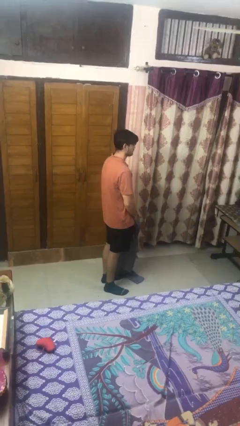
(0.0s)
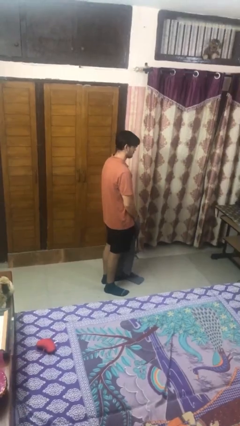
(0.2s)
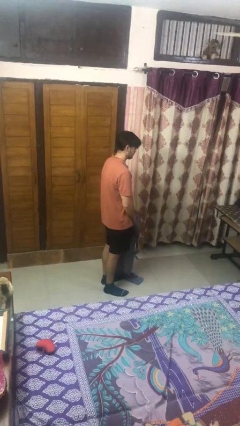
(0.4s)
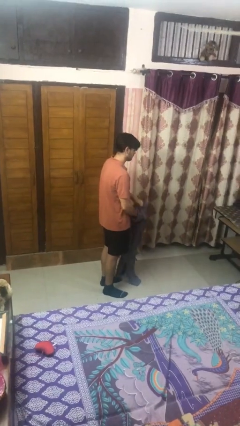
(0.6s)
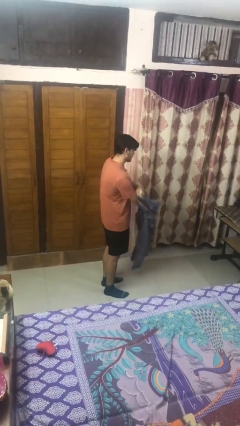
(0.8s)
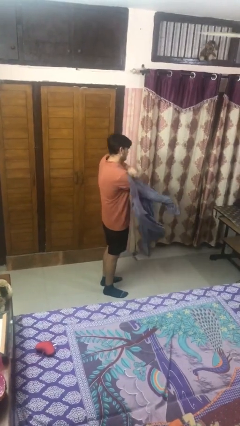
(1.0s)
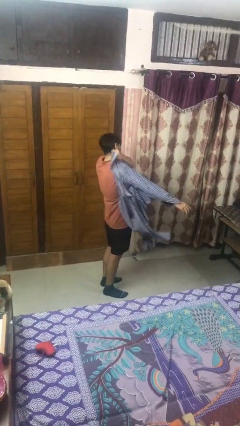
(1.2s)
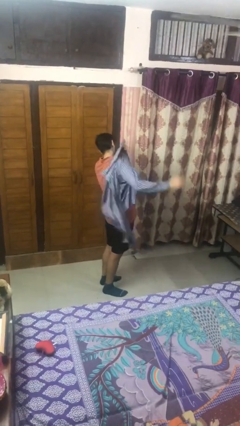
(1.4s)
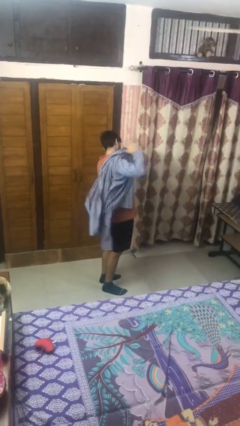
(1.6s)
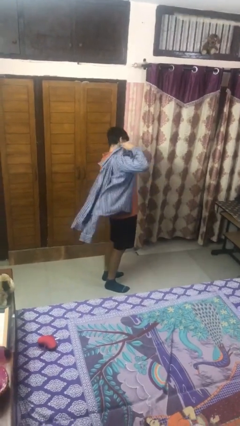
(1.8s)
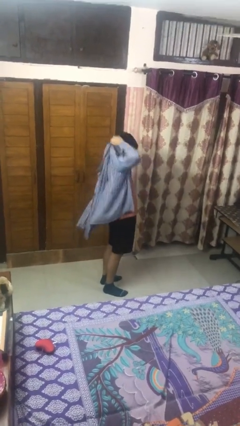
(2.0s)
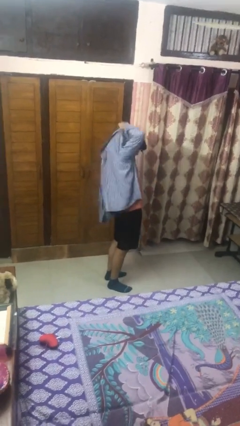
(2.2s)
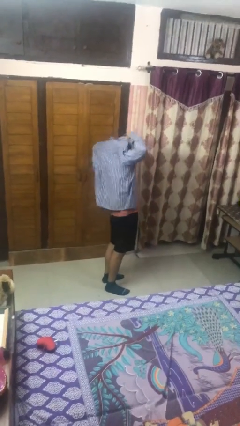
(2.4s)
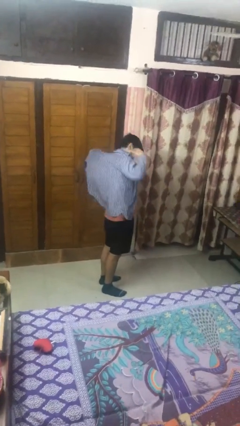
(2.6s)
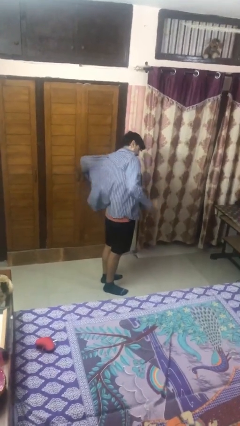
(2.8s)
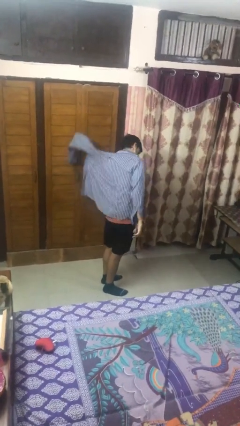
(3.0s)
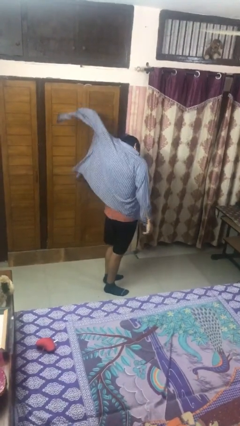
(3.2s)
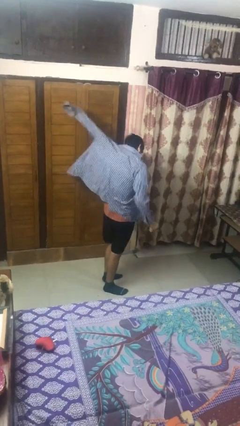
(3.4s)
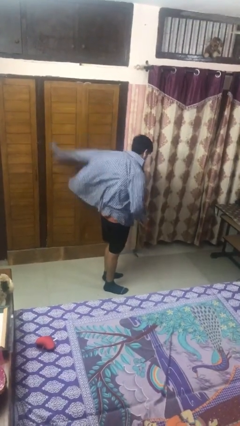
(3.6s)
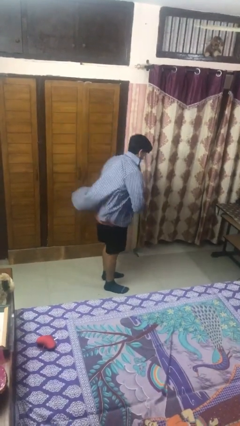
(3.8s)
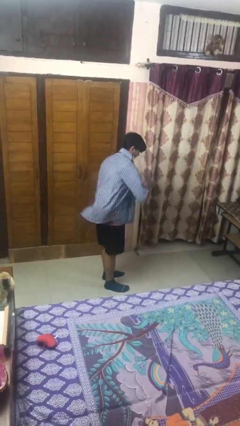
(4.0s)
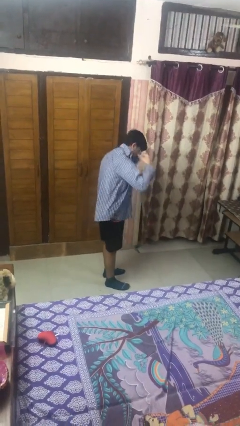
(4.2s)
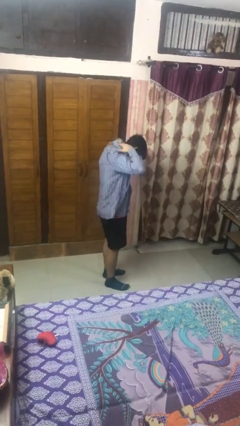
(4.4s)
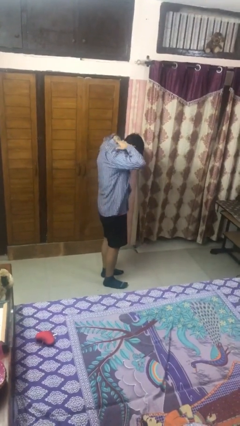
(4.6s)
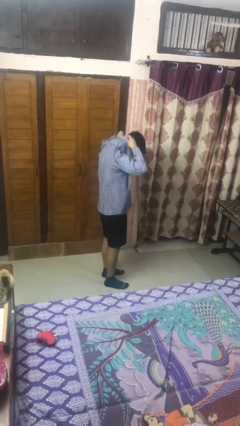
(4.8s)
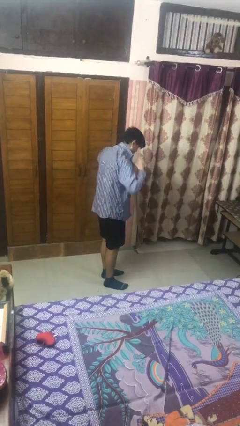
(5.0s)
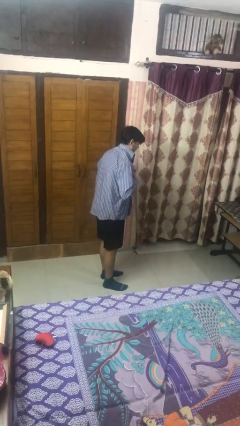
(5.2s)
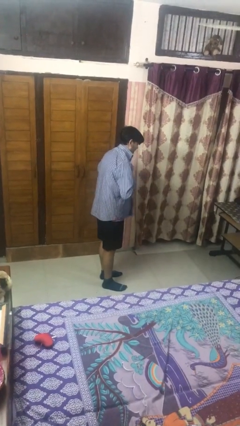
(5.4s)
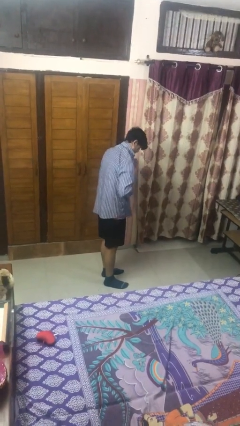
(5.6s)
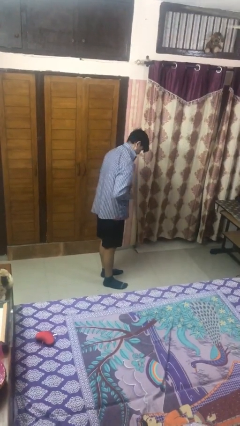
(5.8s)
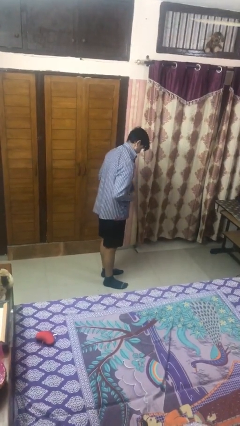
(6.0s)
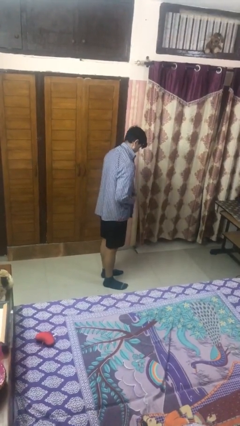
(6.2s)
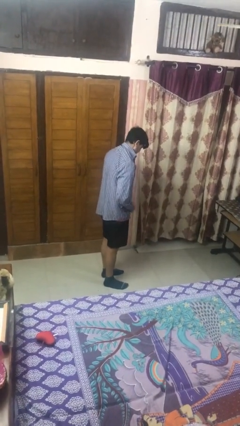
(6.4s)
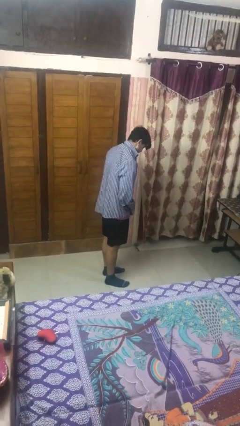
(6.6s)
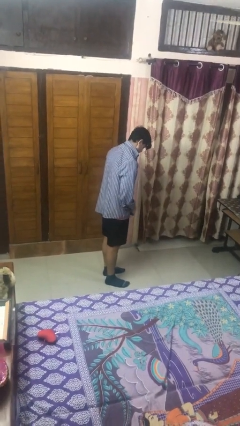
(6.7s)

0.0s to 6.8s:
person puts on shirt

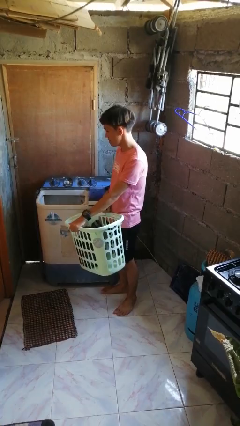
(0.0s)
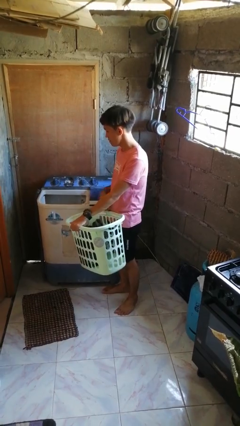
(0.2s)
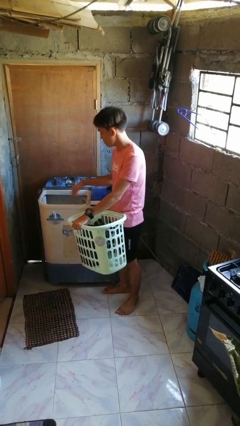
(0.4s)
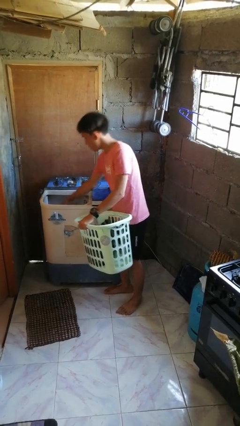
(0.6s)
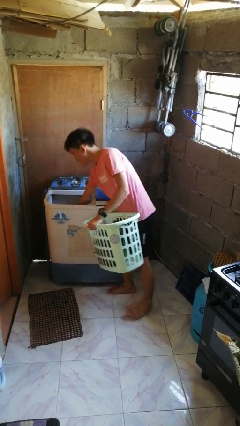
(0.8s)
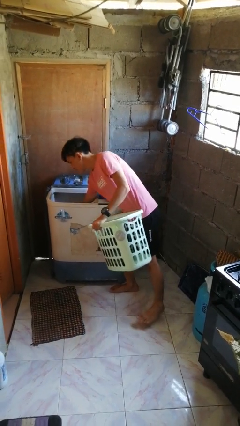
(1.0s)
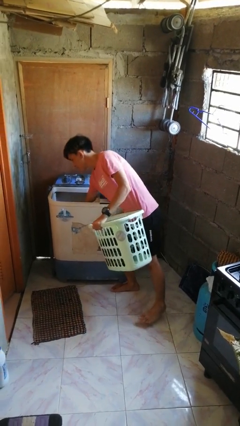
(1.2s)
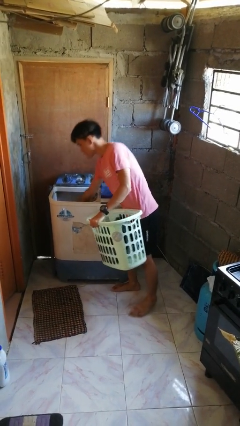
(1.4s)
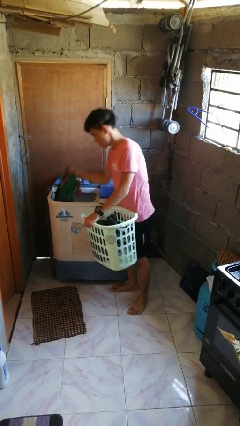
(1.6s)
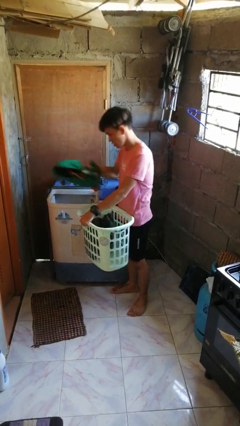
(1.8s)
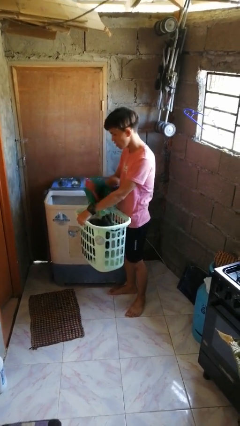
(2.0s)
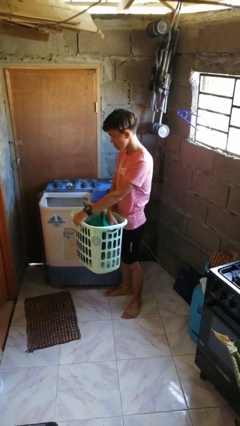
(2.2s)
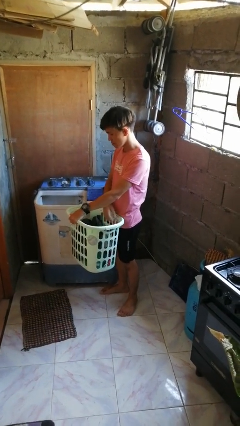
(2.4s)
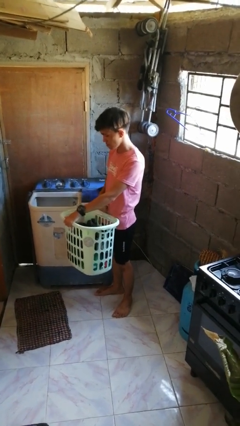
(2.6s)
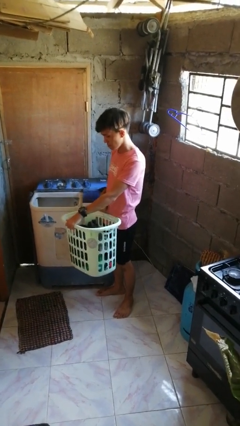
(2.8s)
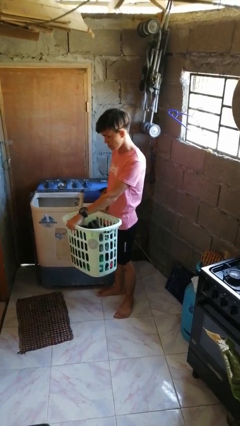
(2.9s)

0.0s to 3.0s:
person loads clotheswasher

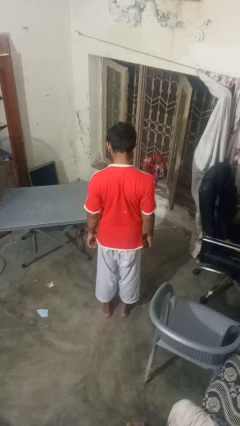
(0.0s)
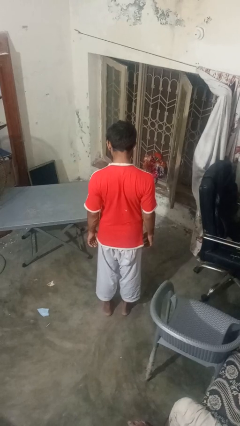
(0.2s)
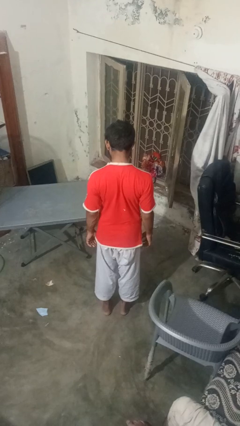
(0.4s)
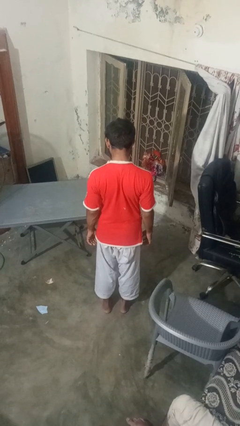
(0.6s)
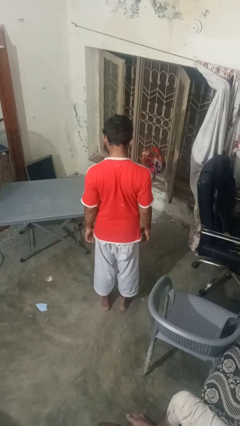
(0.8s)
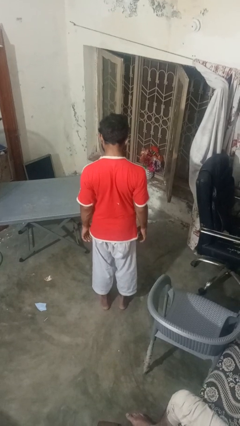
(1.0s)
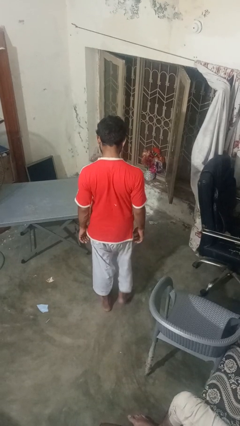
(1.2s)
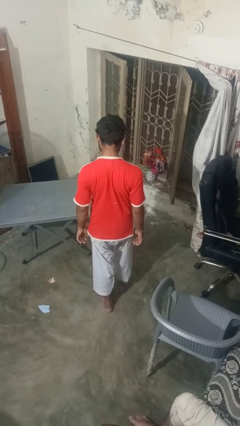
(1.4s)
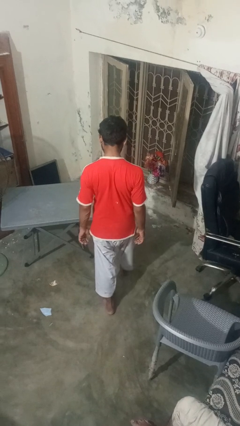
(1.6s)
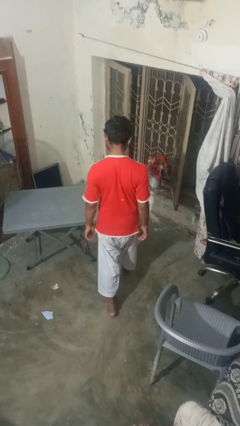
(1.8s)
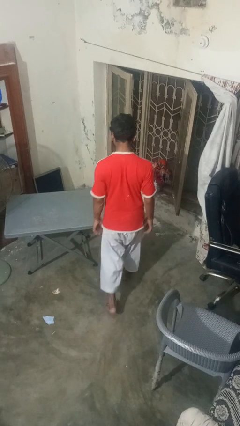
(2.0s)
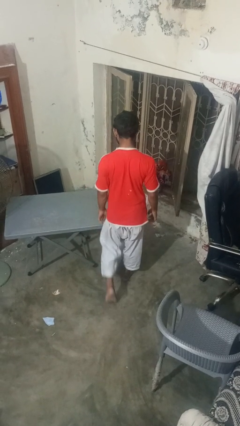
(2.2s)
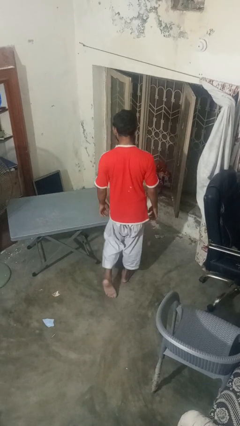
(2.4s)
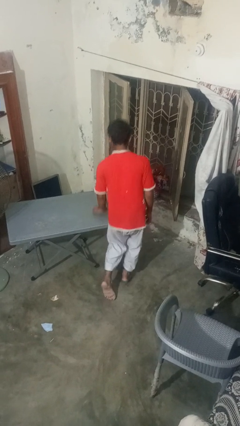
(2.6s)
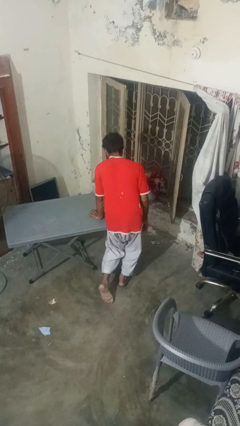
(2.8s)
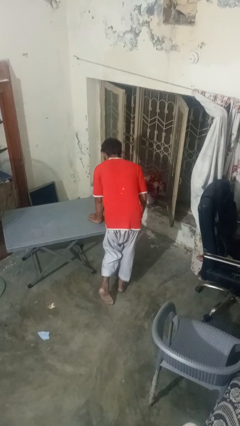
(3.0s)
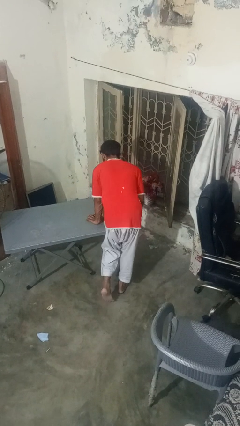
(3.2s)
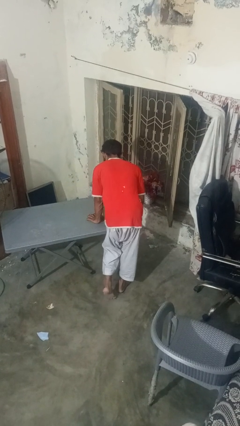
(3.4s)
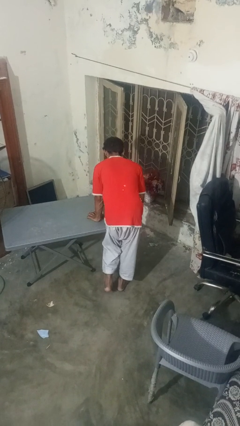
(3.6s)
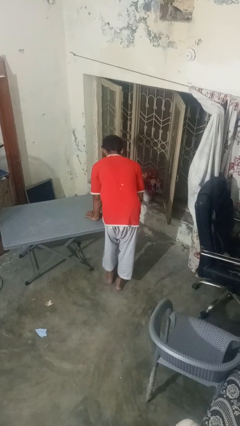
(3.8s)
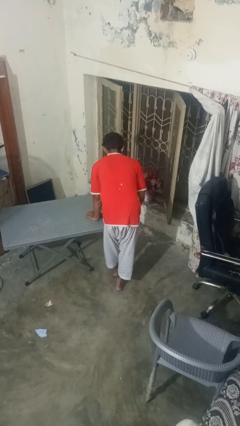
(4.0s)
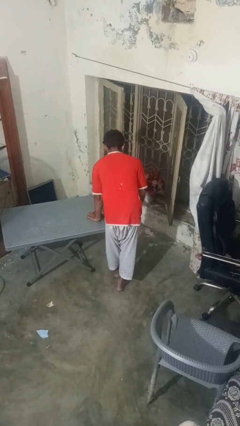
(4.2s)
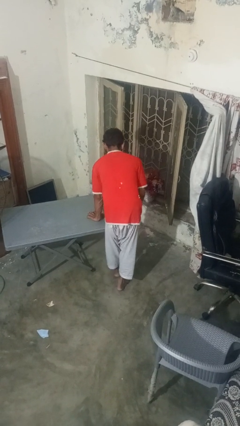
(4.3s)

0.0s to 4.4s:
person bumps into table

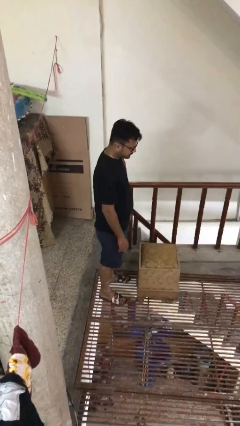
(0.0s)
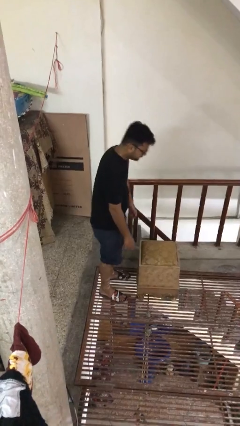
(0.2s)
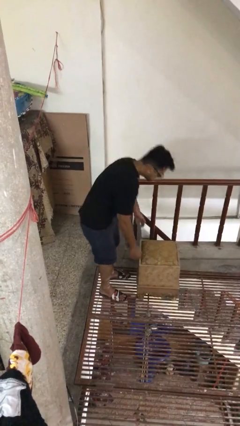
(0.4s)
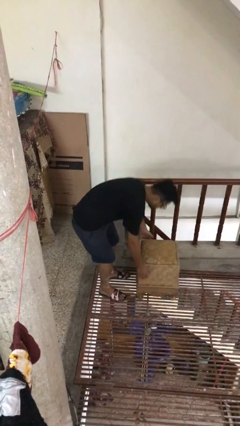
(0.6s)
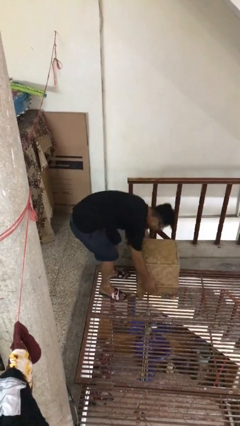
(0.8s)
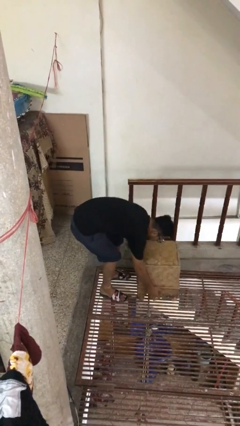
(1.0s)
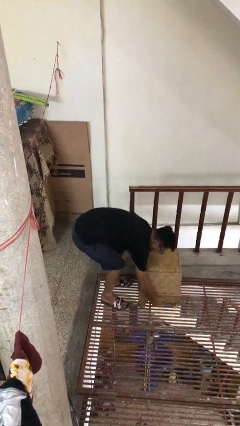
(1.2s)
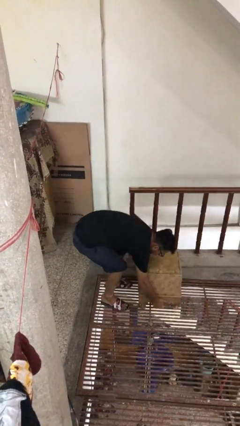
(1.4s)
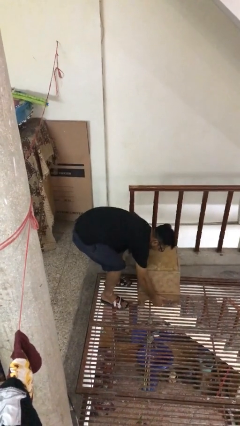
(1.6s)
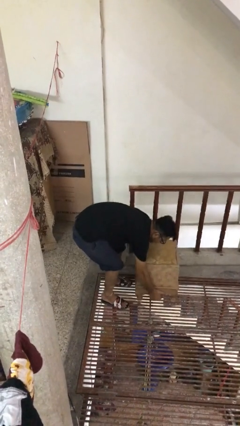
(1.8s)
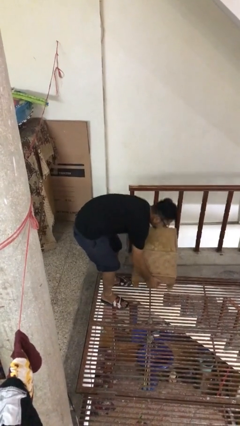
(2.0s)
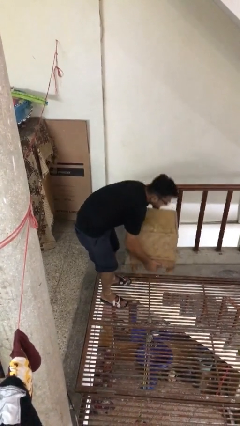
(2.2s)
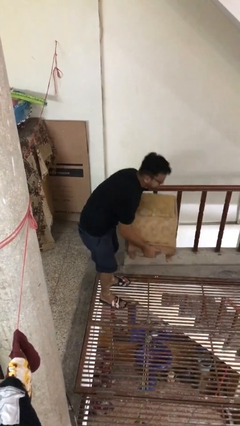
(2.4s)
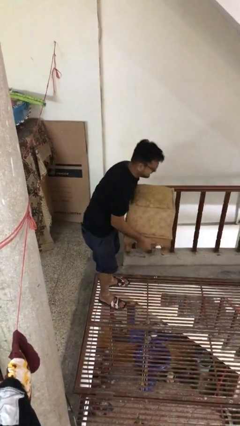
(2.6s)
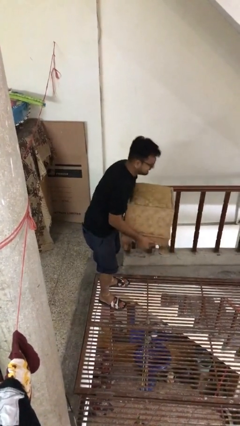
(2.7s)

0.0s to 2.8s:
person picks up object from floor

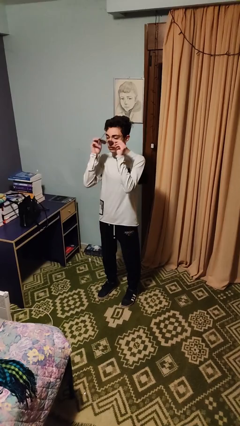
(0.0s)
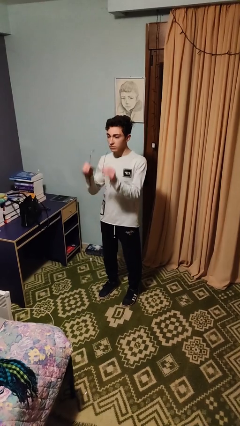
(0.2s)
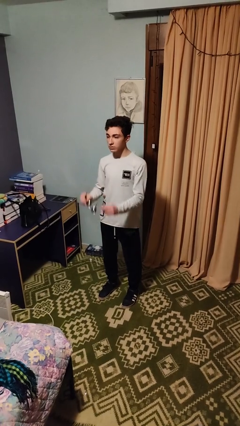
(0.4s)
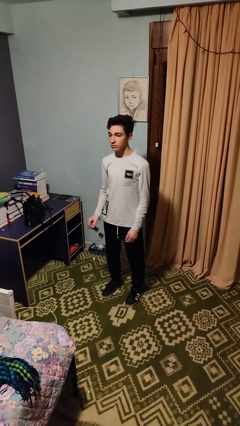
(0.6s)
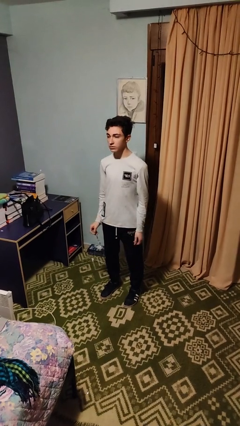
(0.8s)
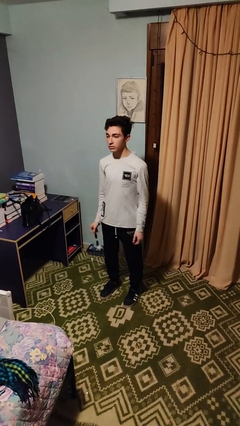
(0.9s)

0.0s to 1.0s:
person takes off sunglasses
